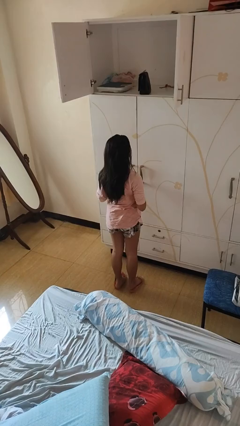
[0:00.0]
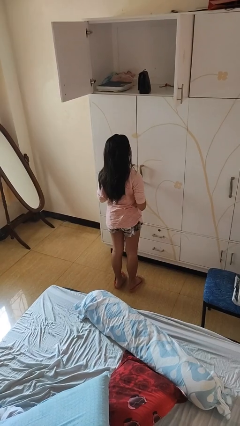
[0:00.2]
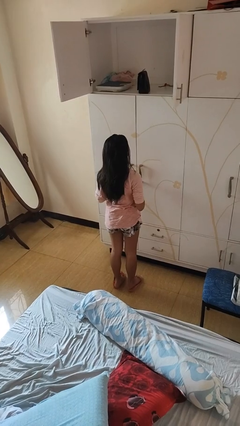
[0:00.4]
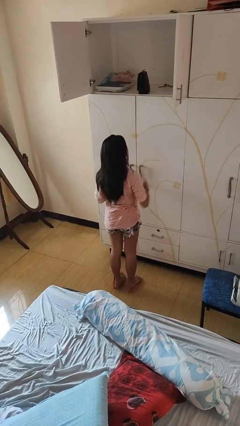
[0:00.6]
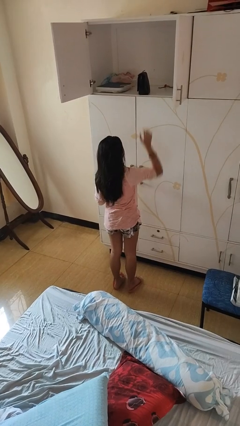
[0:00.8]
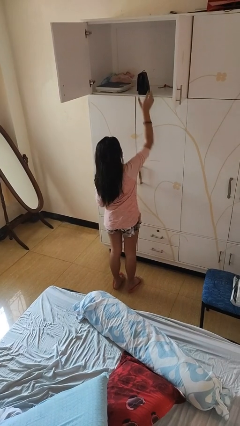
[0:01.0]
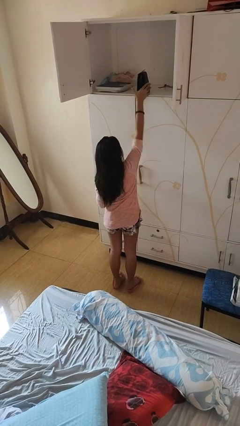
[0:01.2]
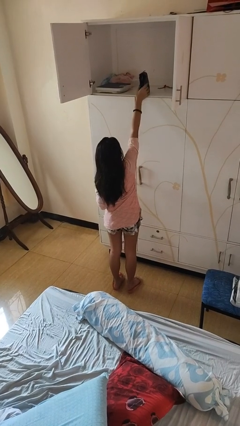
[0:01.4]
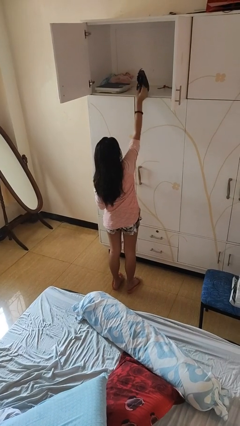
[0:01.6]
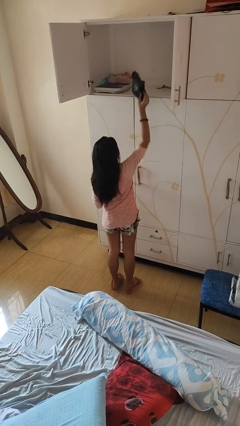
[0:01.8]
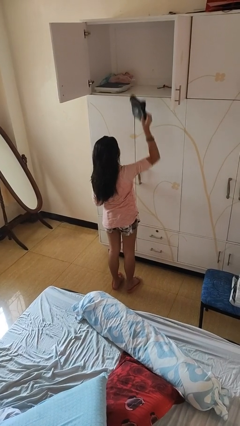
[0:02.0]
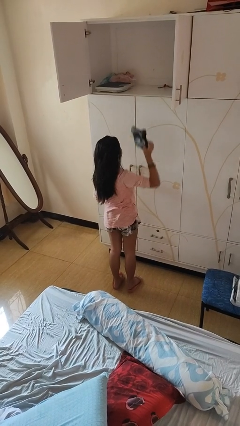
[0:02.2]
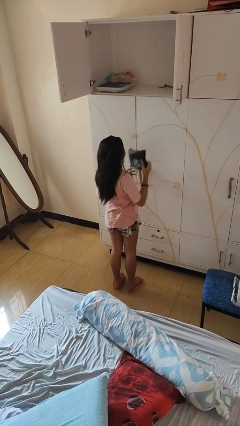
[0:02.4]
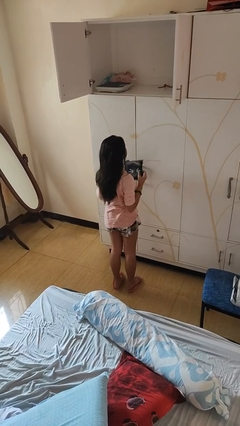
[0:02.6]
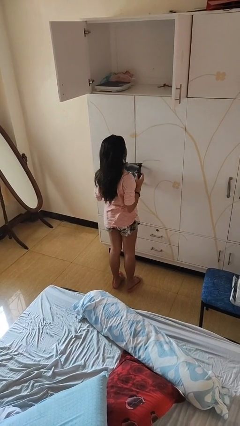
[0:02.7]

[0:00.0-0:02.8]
person picks up object from shelf

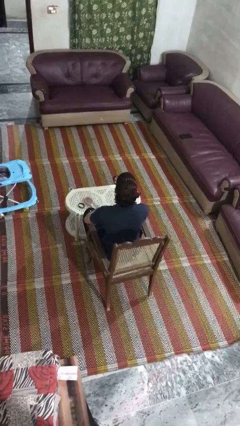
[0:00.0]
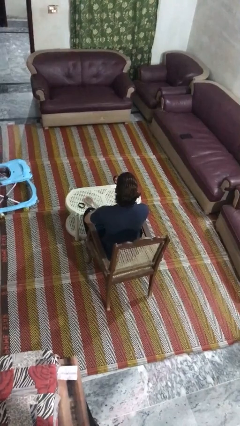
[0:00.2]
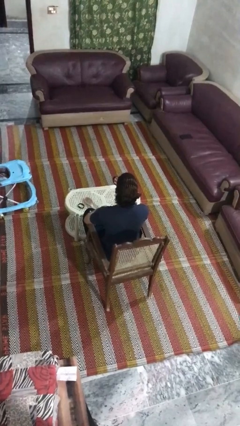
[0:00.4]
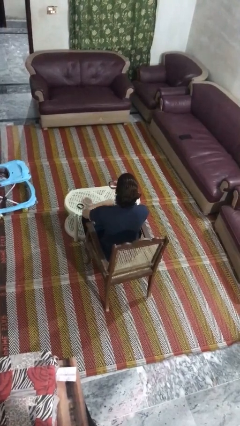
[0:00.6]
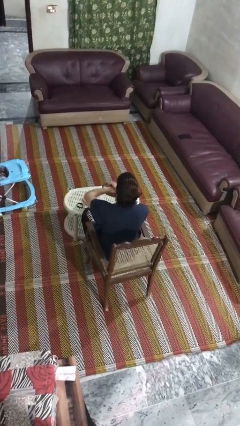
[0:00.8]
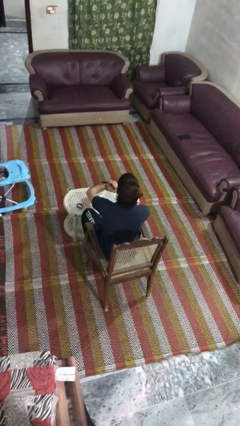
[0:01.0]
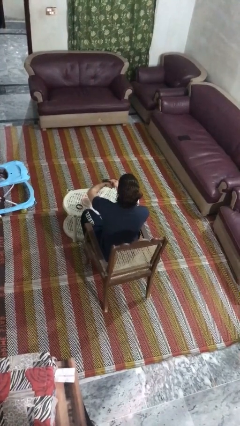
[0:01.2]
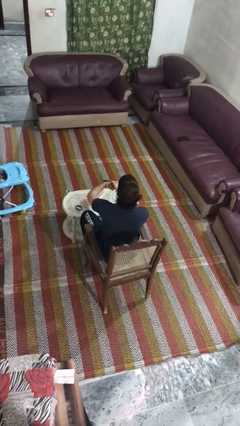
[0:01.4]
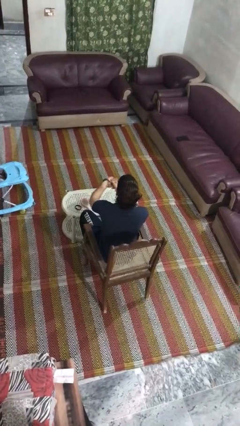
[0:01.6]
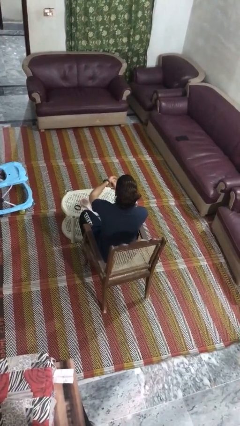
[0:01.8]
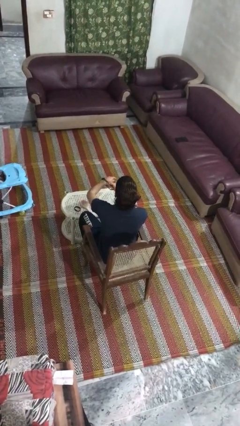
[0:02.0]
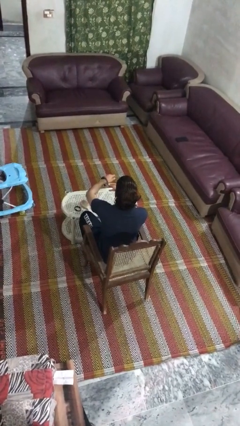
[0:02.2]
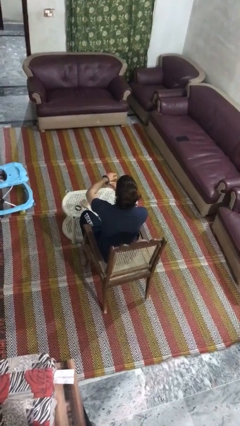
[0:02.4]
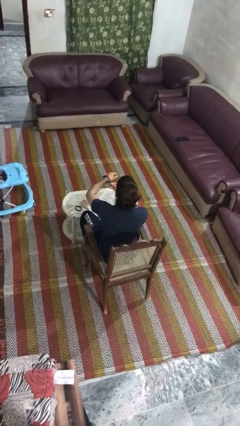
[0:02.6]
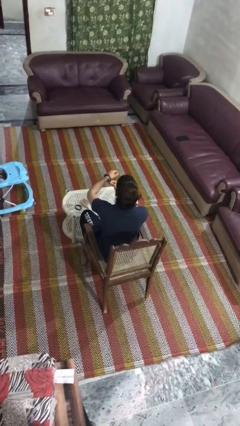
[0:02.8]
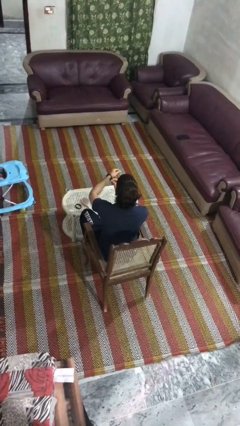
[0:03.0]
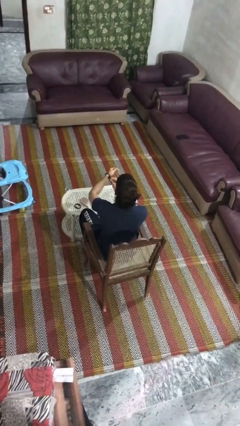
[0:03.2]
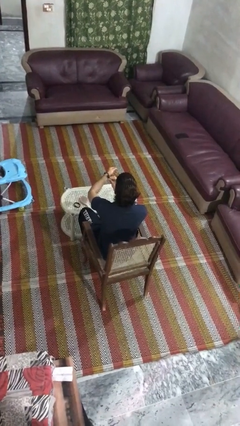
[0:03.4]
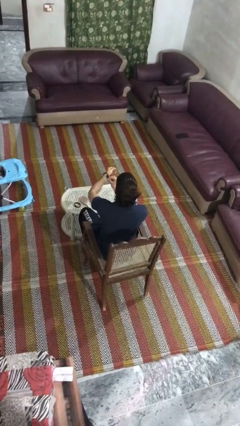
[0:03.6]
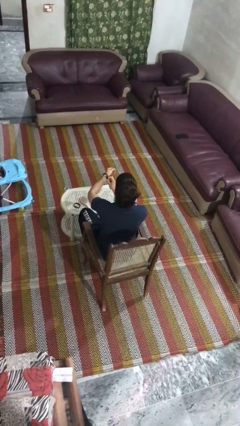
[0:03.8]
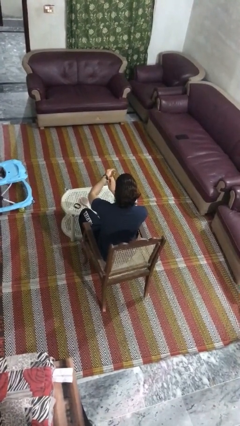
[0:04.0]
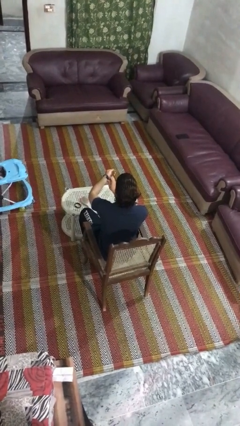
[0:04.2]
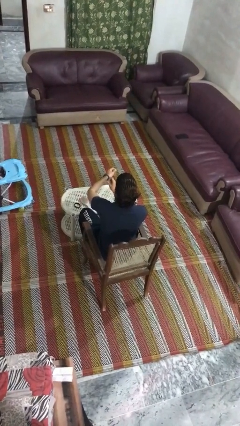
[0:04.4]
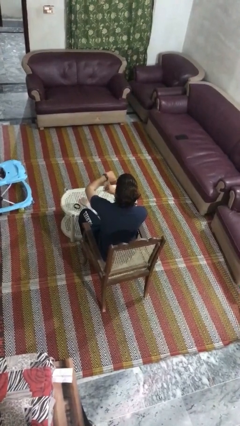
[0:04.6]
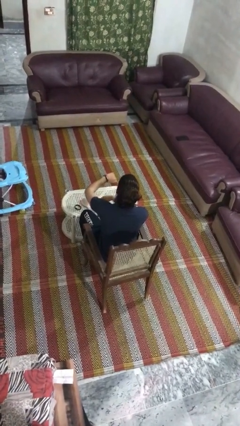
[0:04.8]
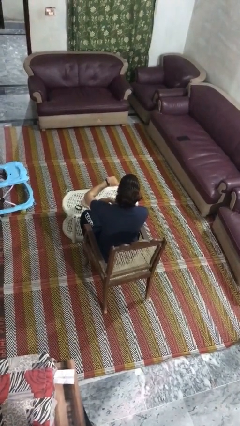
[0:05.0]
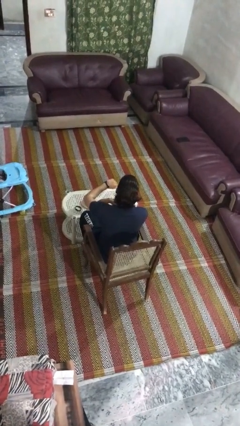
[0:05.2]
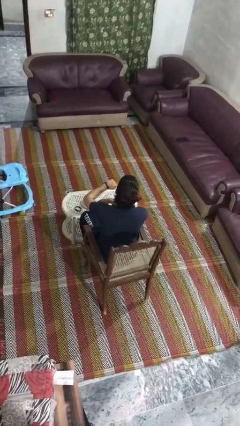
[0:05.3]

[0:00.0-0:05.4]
person puts on wristwatch

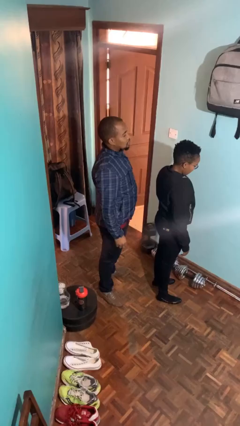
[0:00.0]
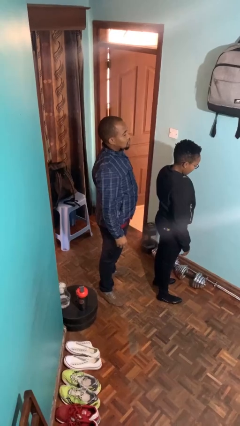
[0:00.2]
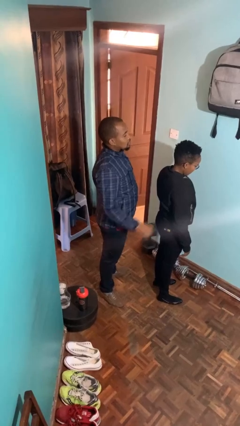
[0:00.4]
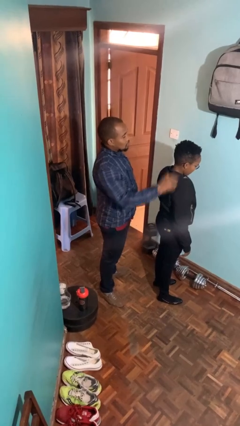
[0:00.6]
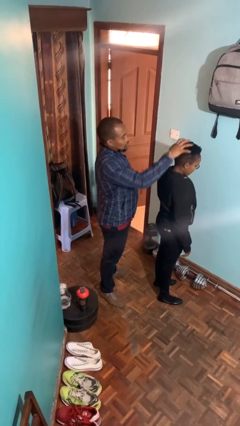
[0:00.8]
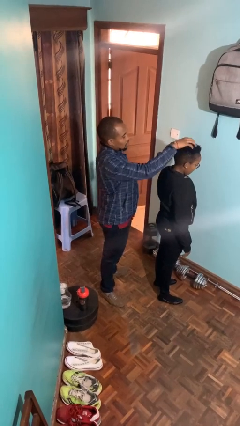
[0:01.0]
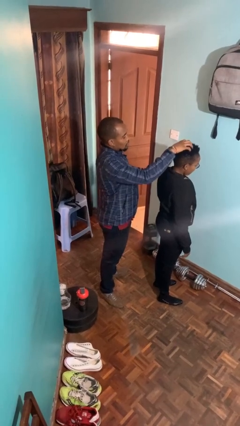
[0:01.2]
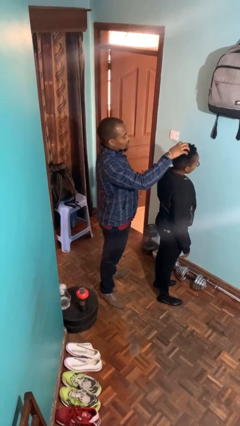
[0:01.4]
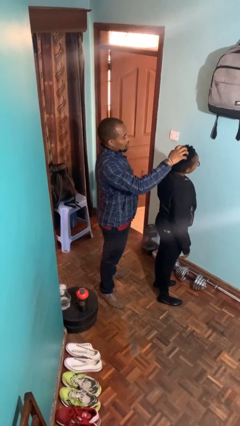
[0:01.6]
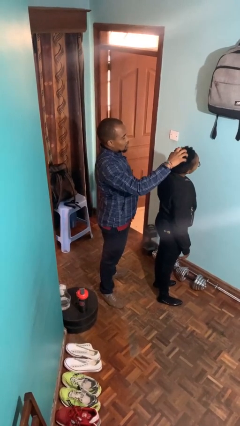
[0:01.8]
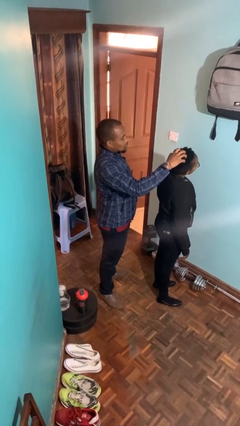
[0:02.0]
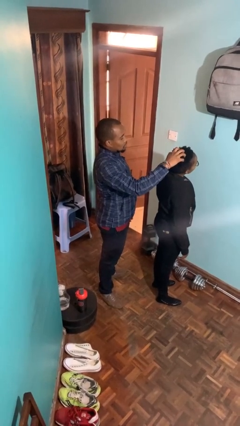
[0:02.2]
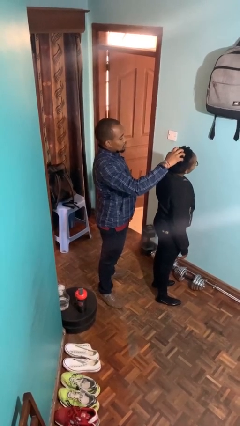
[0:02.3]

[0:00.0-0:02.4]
person grabs person by hair

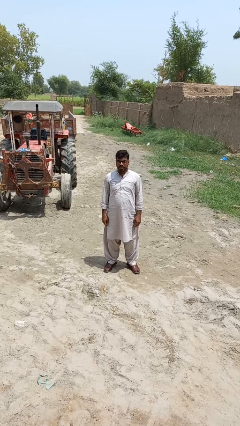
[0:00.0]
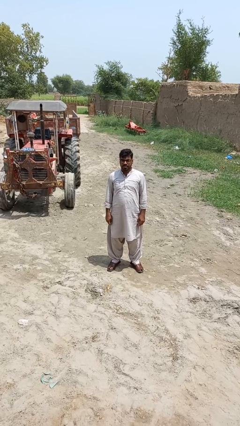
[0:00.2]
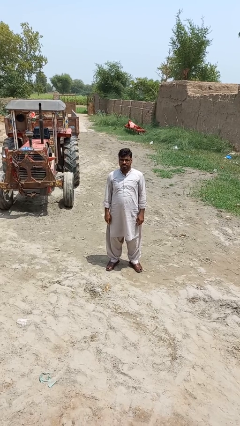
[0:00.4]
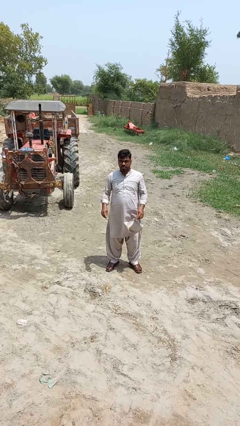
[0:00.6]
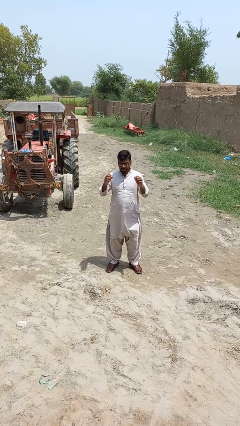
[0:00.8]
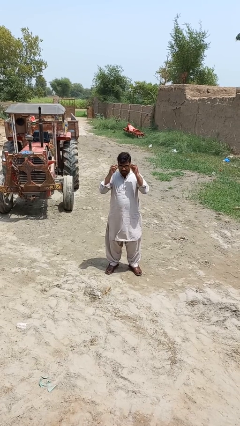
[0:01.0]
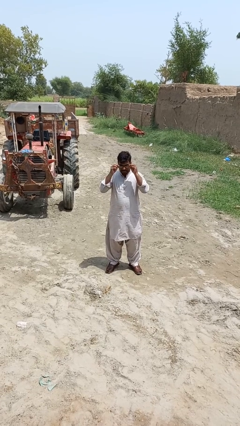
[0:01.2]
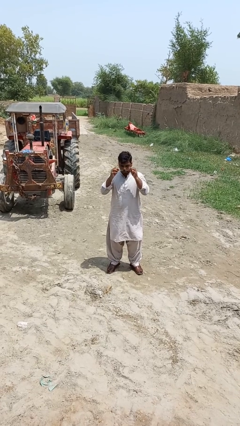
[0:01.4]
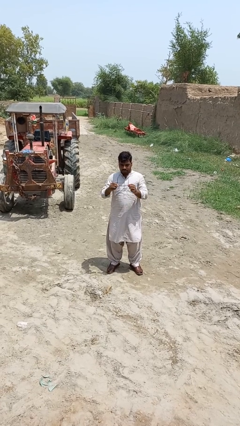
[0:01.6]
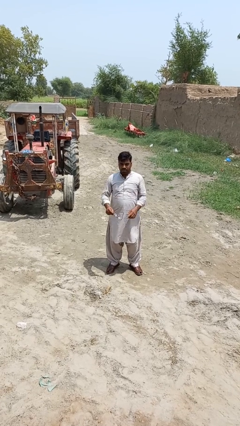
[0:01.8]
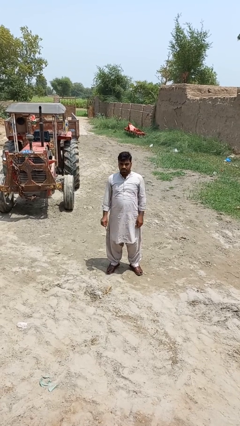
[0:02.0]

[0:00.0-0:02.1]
person takes off glasses

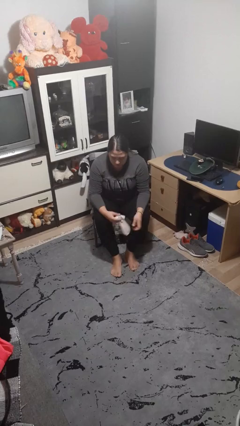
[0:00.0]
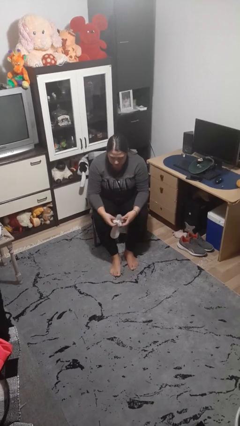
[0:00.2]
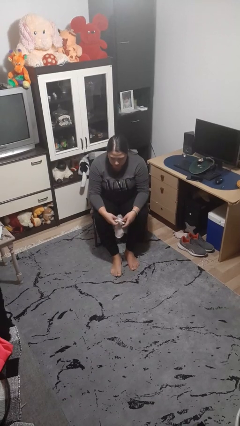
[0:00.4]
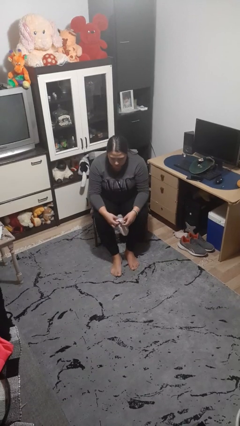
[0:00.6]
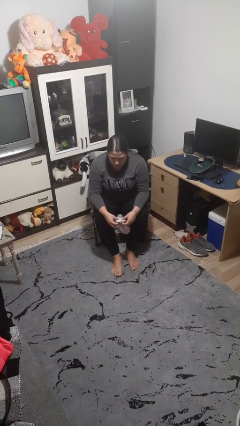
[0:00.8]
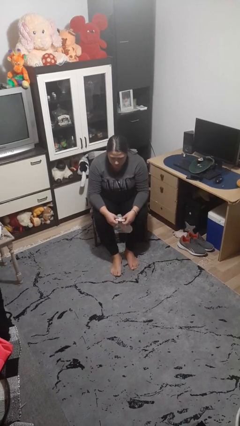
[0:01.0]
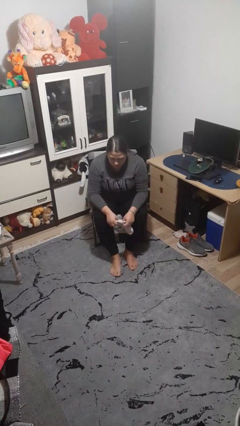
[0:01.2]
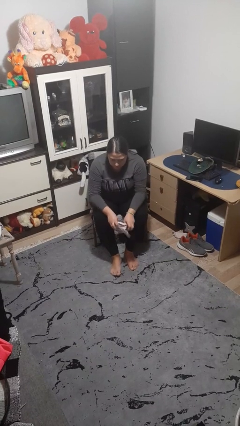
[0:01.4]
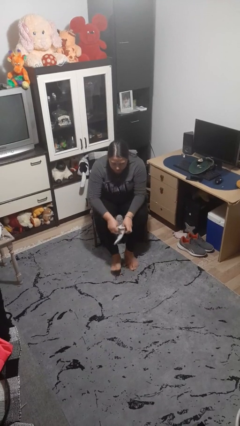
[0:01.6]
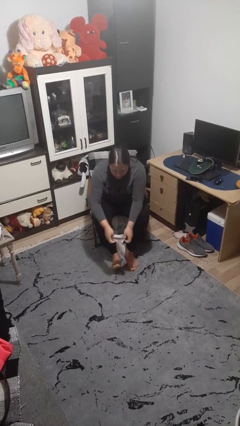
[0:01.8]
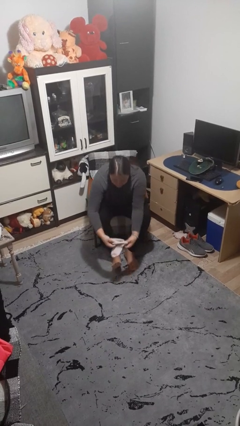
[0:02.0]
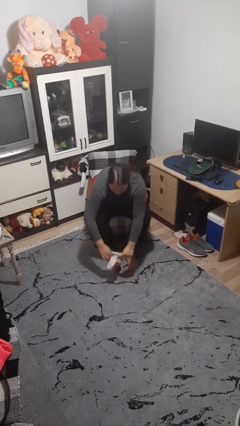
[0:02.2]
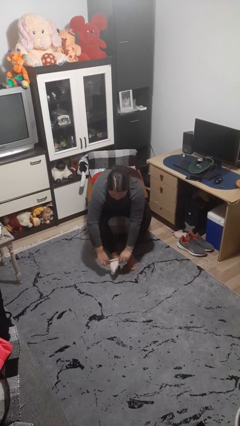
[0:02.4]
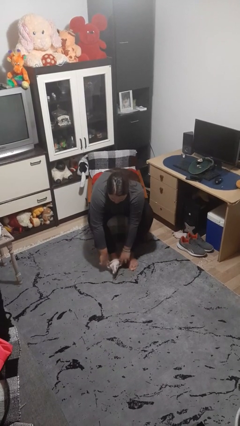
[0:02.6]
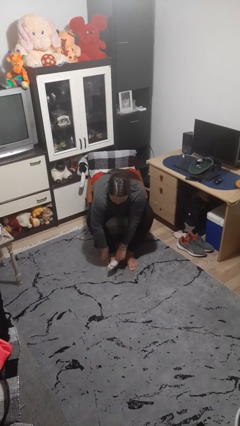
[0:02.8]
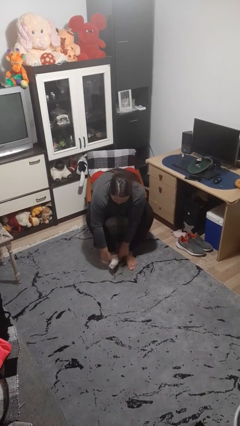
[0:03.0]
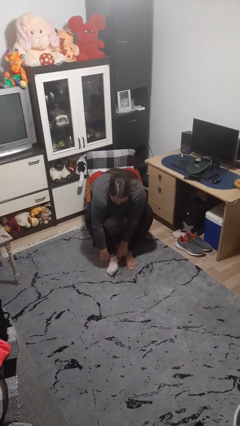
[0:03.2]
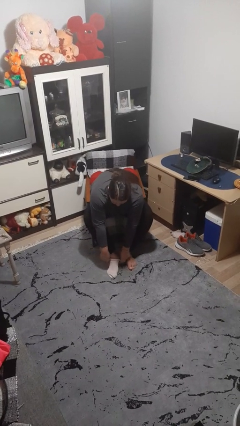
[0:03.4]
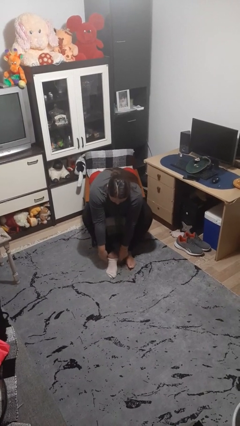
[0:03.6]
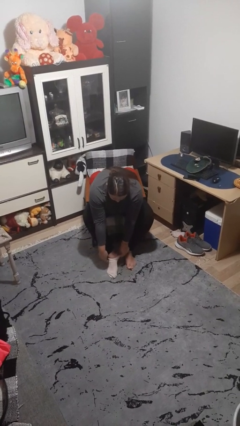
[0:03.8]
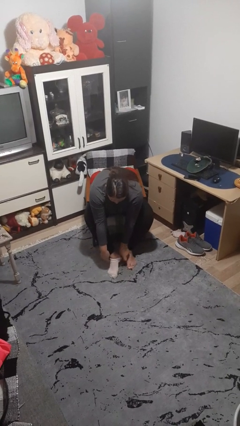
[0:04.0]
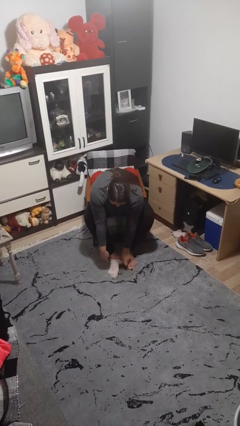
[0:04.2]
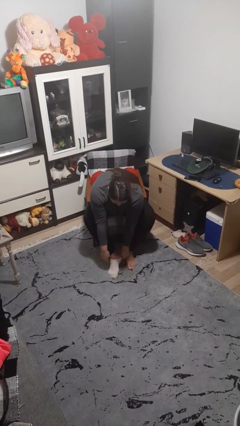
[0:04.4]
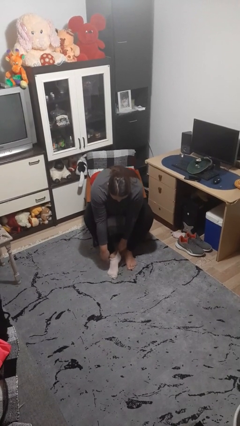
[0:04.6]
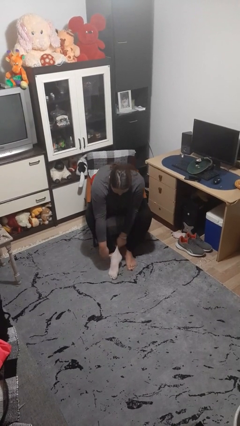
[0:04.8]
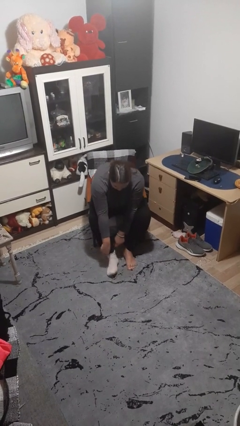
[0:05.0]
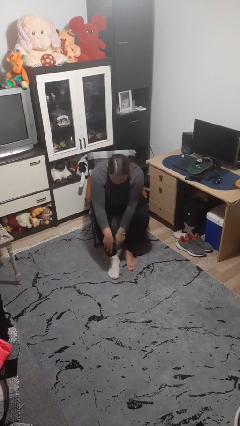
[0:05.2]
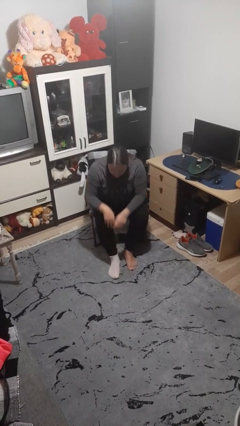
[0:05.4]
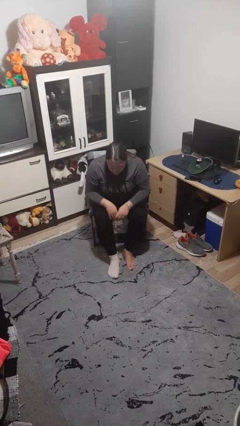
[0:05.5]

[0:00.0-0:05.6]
person puts on socks
